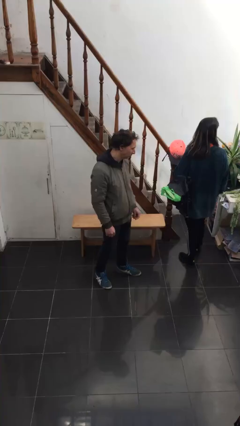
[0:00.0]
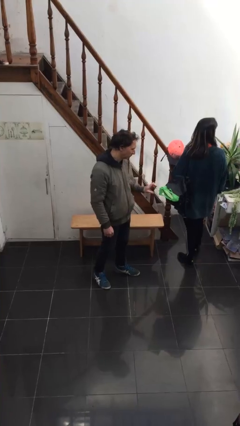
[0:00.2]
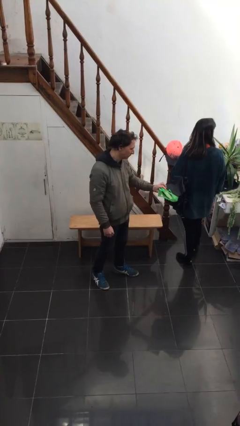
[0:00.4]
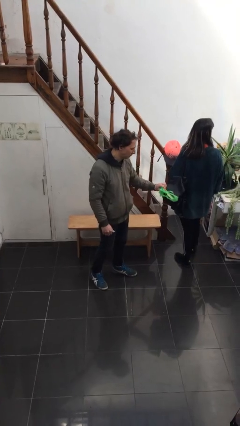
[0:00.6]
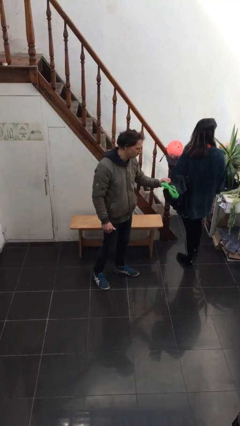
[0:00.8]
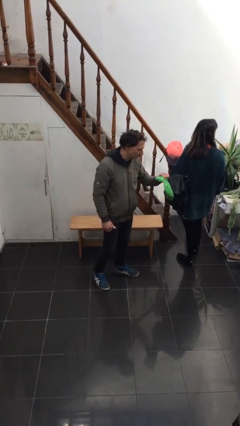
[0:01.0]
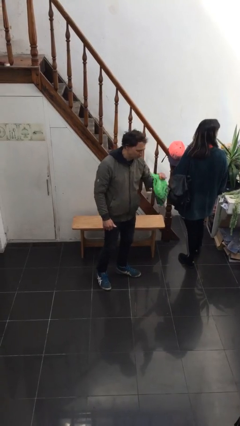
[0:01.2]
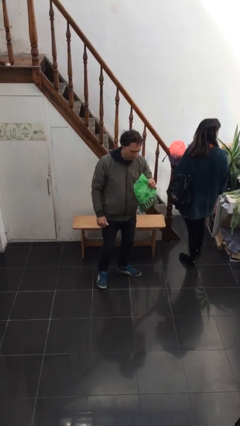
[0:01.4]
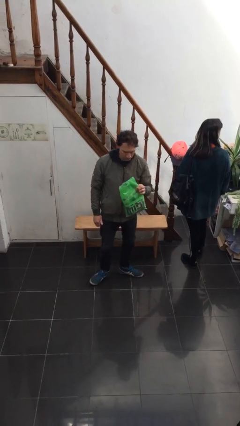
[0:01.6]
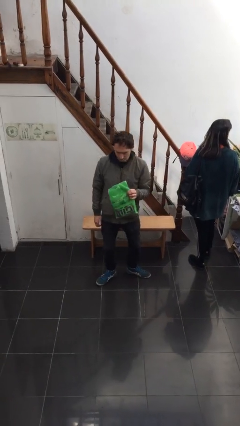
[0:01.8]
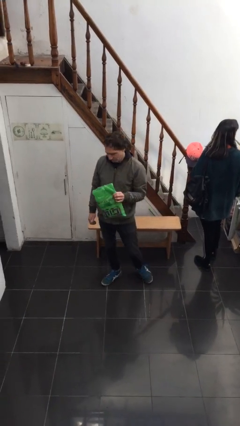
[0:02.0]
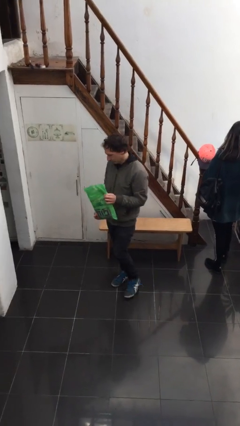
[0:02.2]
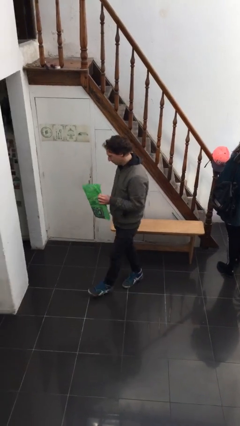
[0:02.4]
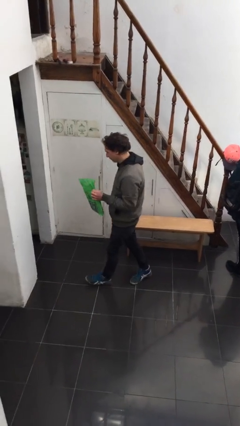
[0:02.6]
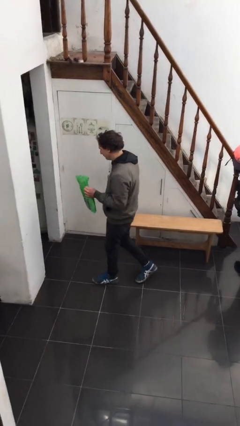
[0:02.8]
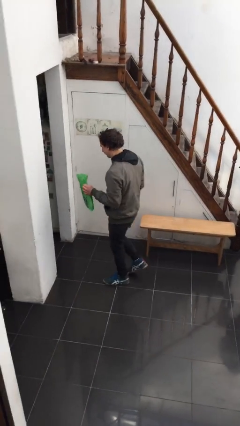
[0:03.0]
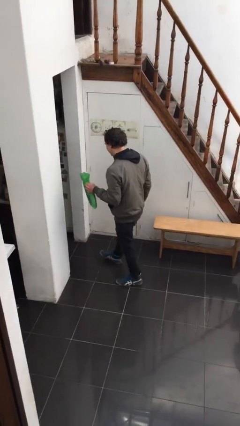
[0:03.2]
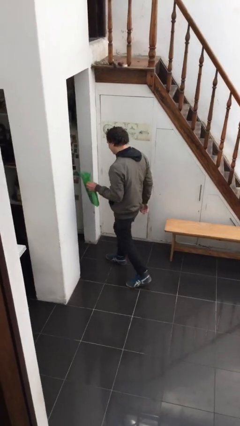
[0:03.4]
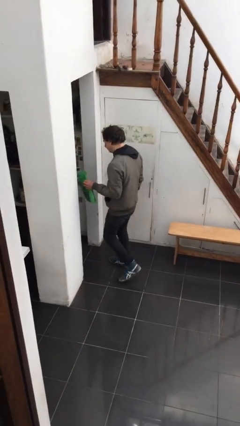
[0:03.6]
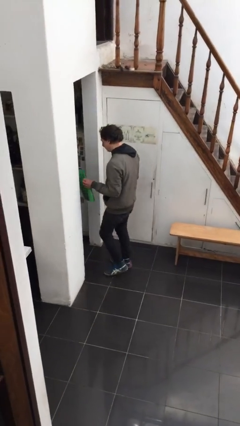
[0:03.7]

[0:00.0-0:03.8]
person steals object from person

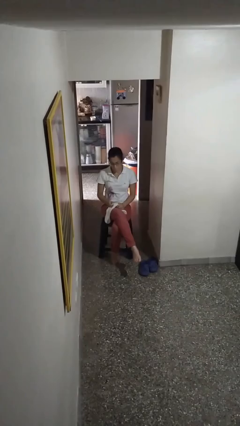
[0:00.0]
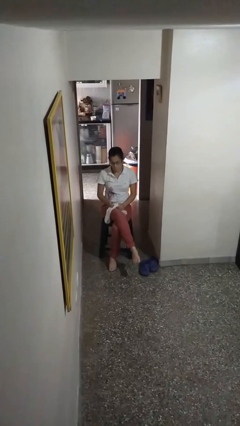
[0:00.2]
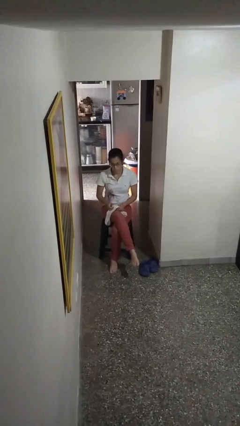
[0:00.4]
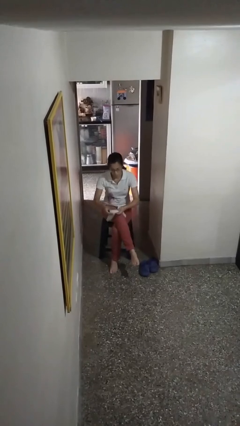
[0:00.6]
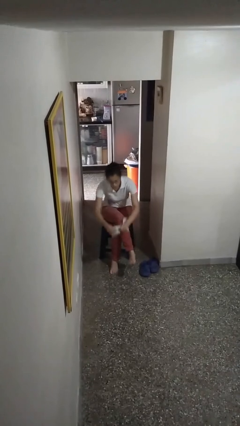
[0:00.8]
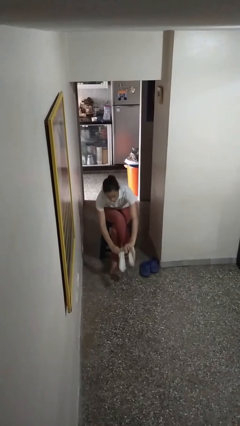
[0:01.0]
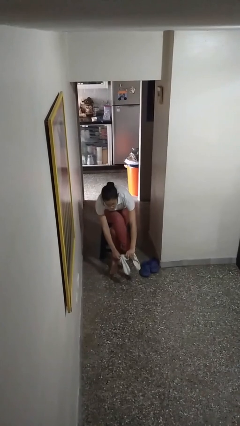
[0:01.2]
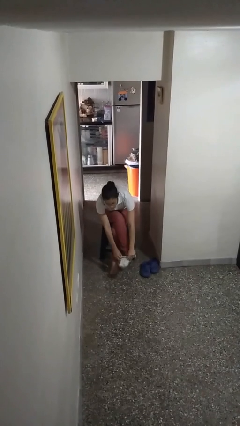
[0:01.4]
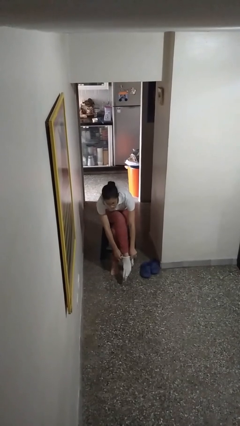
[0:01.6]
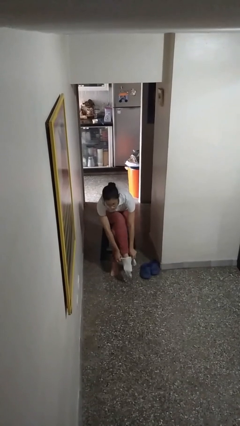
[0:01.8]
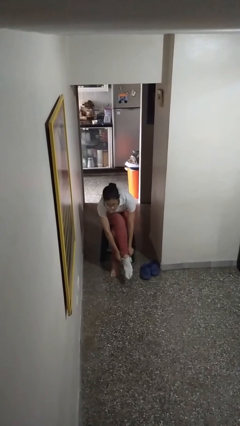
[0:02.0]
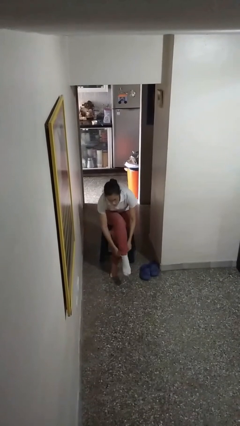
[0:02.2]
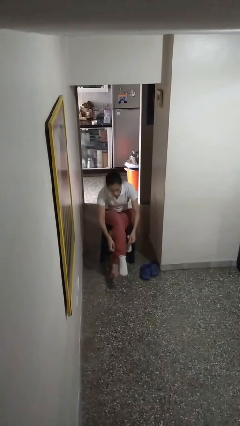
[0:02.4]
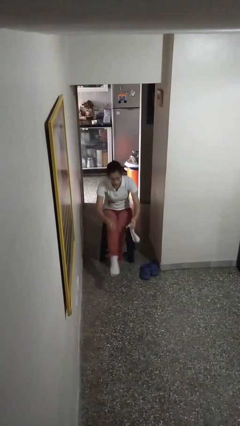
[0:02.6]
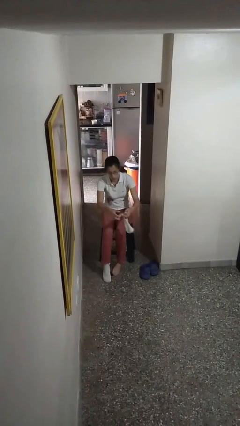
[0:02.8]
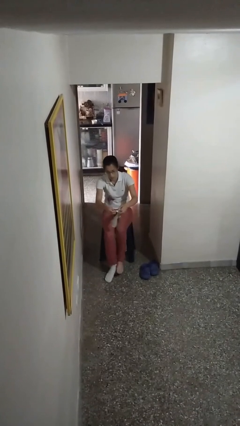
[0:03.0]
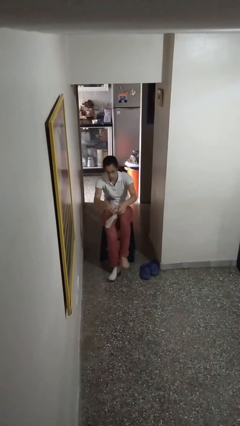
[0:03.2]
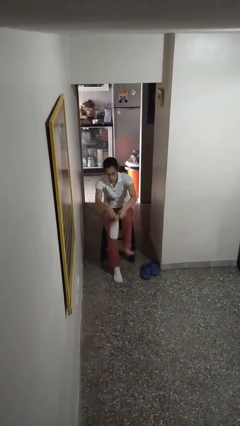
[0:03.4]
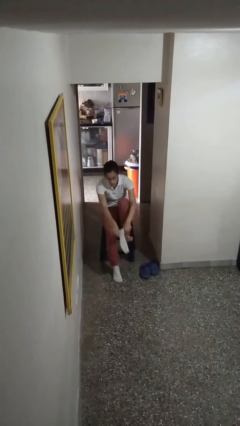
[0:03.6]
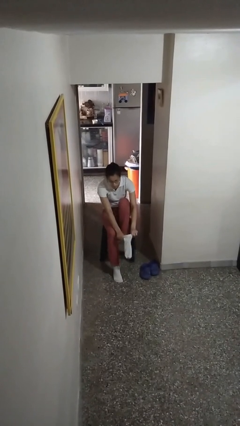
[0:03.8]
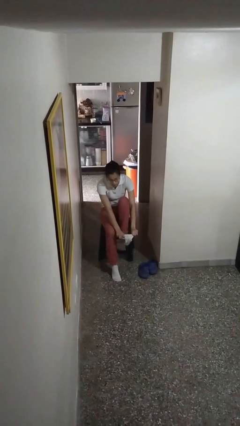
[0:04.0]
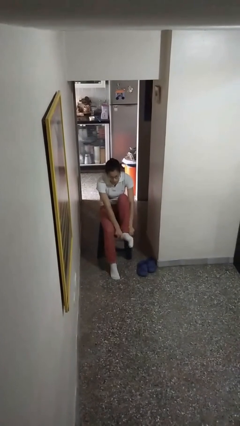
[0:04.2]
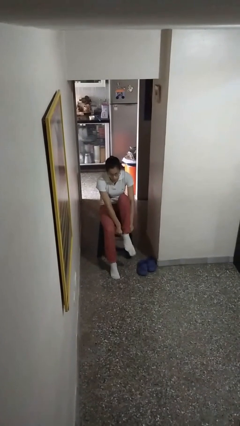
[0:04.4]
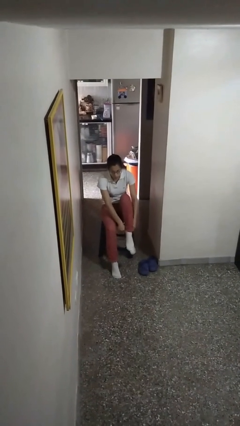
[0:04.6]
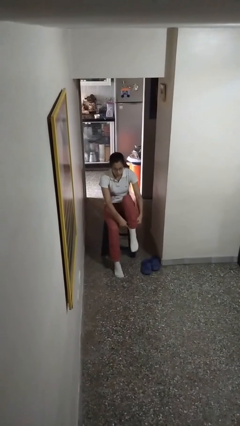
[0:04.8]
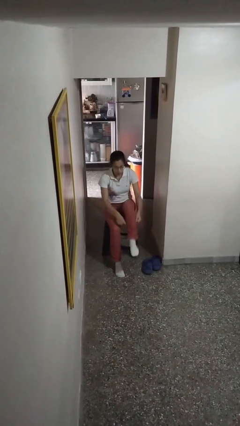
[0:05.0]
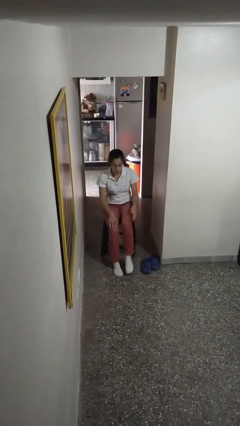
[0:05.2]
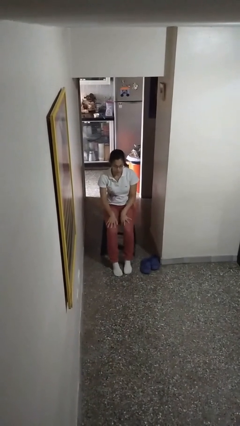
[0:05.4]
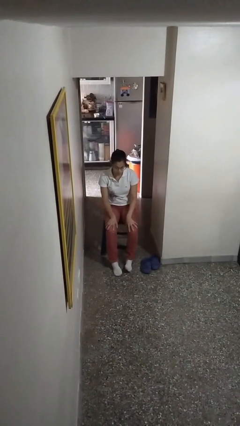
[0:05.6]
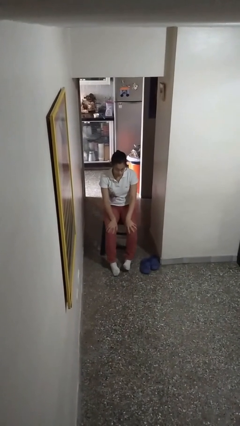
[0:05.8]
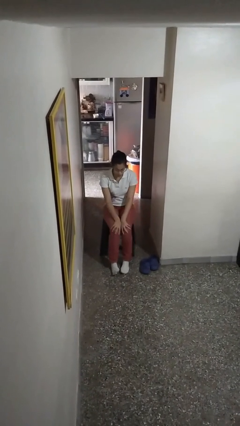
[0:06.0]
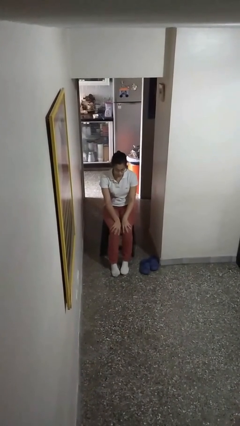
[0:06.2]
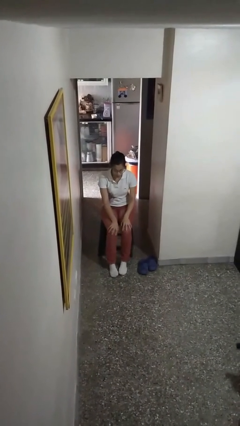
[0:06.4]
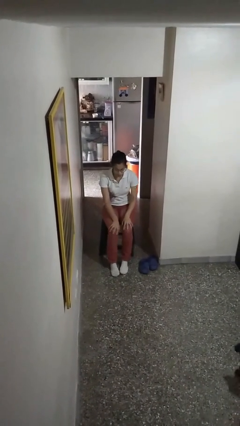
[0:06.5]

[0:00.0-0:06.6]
person puts on socks

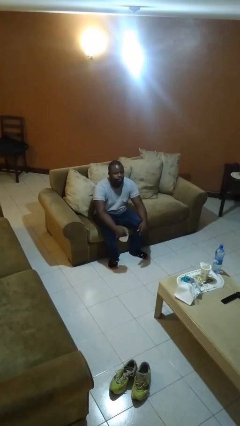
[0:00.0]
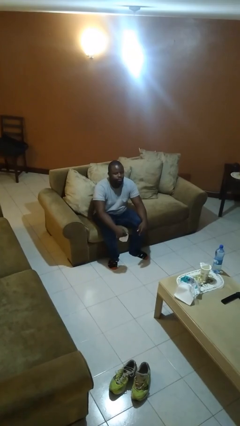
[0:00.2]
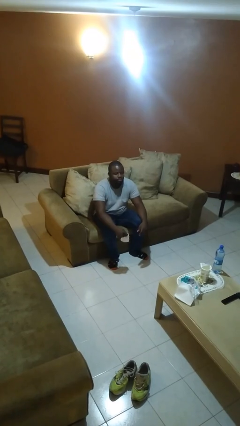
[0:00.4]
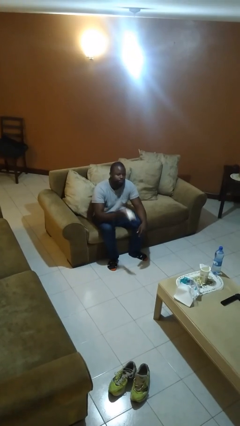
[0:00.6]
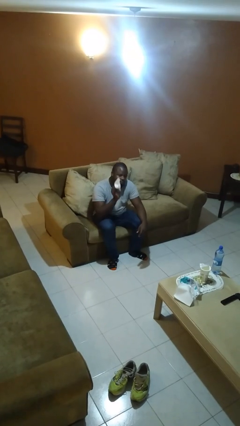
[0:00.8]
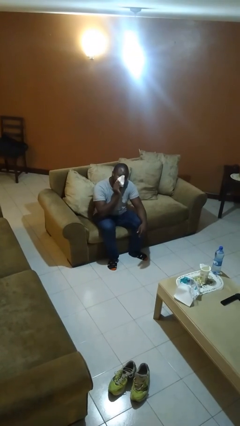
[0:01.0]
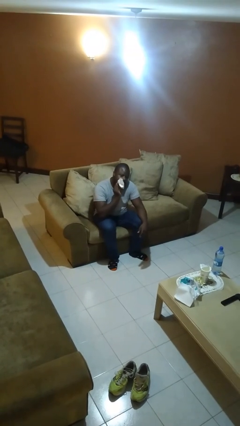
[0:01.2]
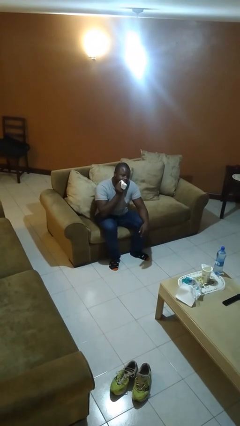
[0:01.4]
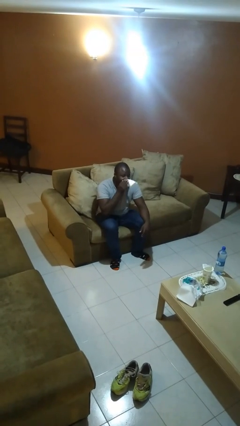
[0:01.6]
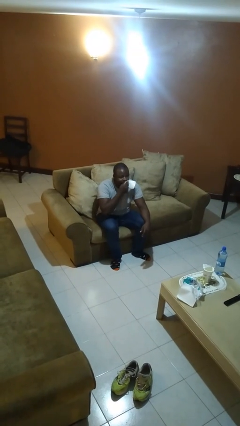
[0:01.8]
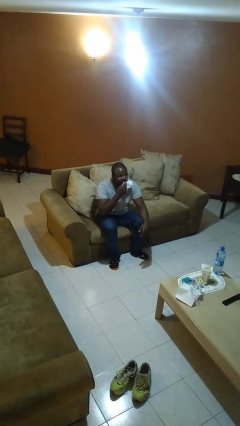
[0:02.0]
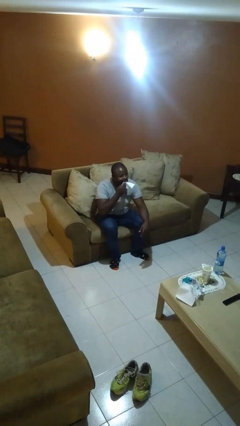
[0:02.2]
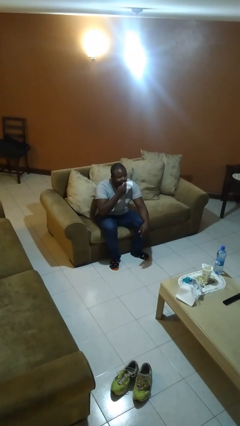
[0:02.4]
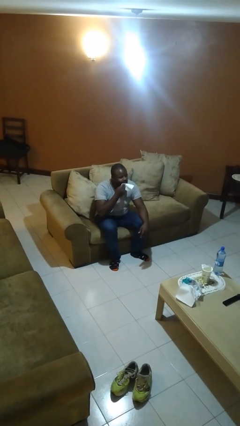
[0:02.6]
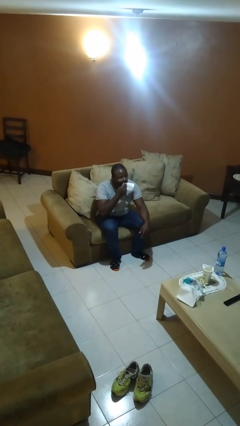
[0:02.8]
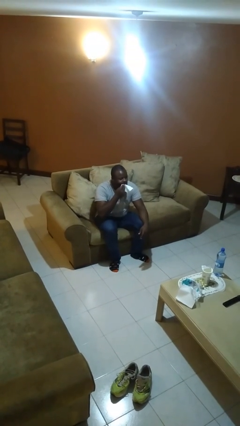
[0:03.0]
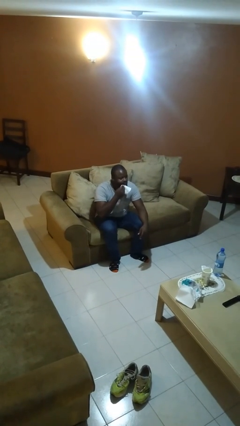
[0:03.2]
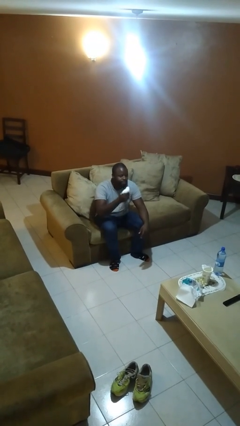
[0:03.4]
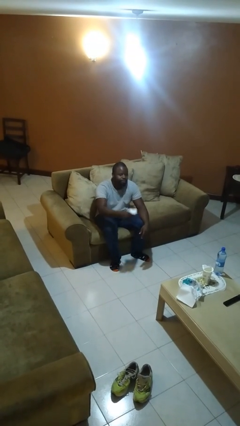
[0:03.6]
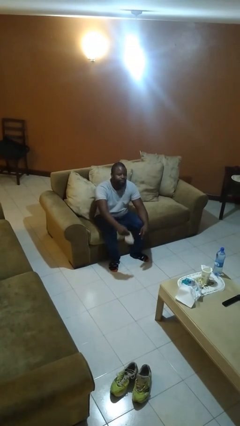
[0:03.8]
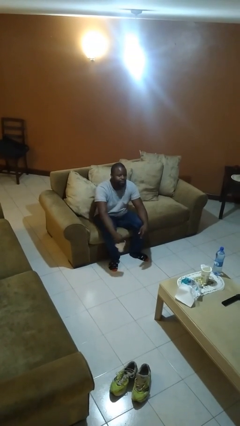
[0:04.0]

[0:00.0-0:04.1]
person wipes mouth with napkin

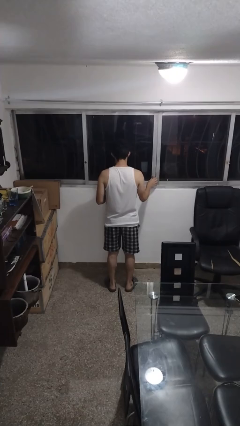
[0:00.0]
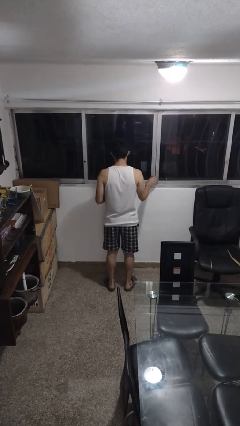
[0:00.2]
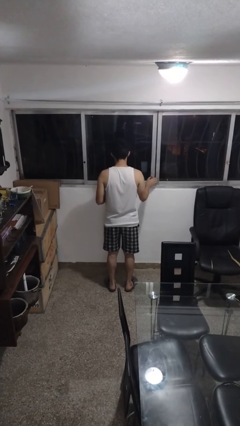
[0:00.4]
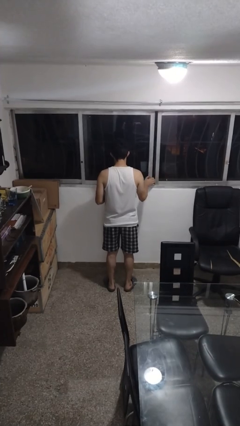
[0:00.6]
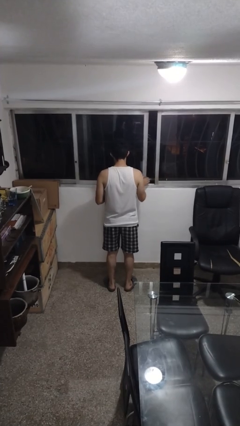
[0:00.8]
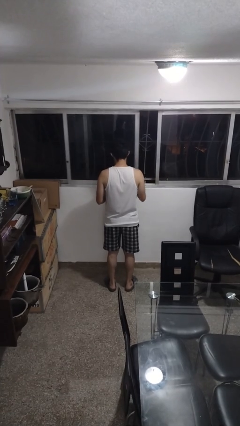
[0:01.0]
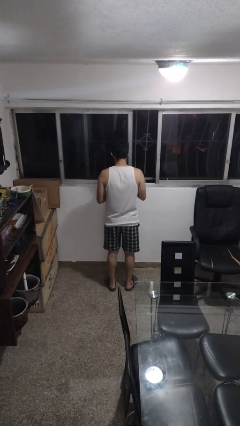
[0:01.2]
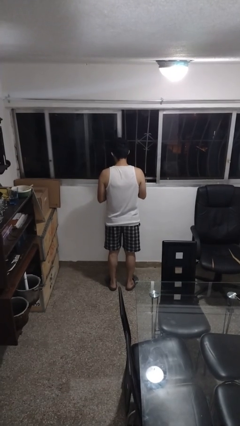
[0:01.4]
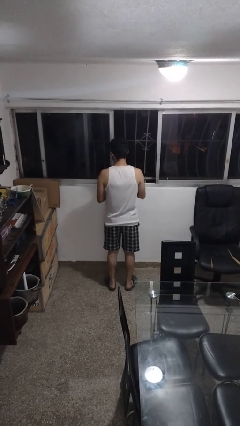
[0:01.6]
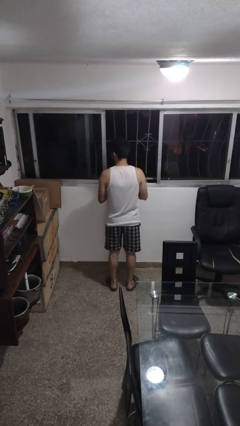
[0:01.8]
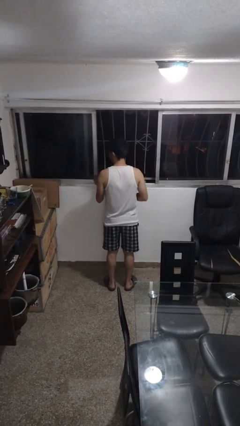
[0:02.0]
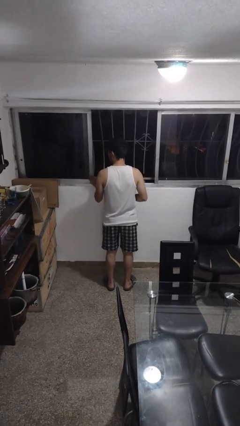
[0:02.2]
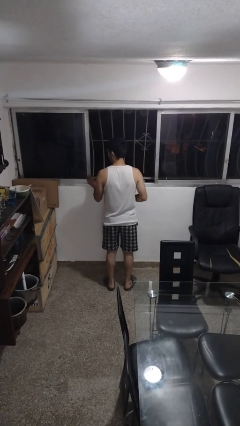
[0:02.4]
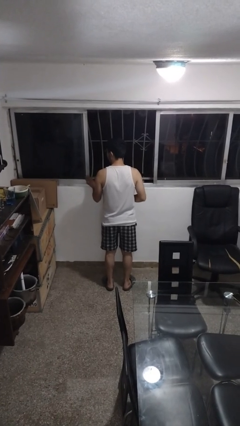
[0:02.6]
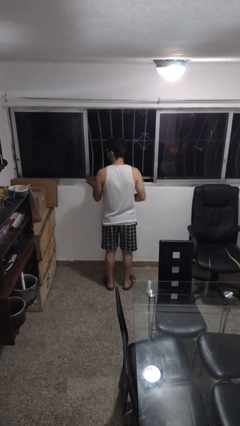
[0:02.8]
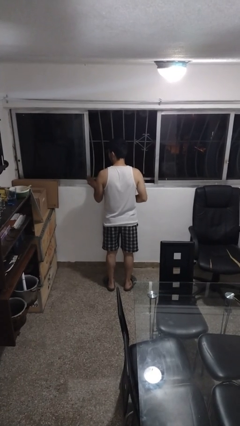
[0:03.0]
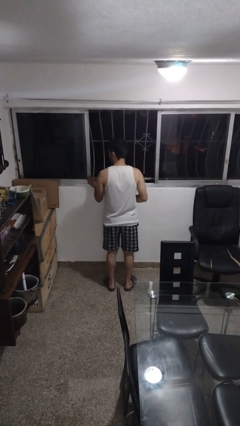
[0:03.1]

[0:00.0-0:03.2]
person opens home window
